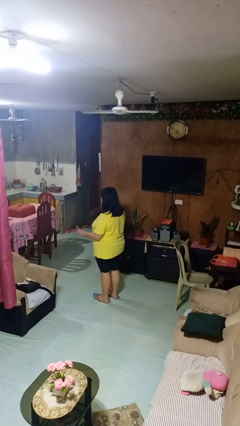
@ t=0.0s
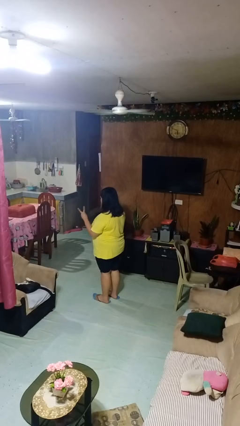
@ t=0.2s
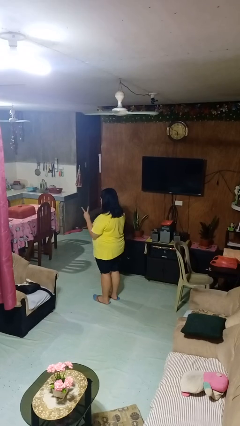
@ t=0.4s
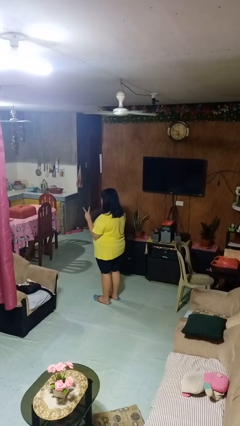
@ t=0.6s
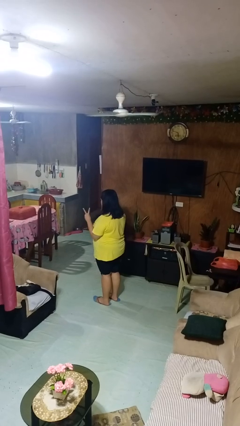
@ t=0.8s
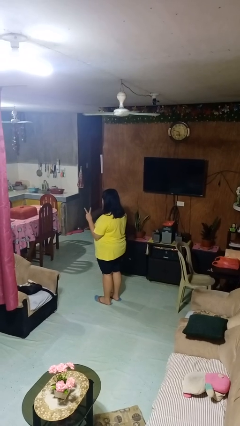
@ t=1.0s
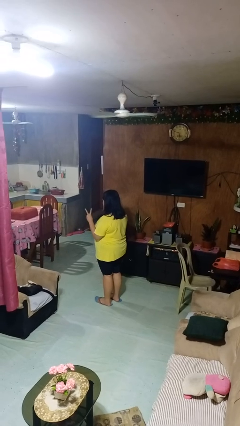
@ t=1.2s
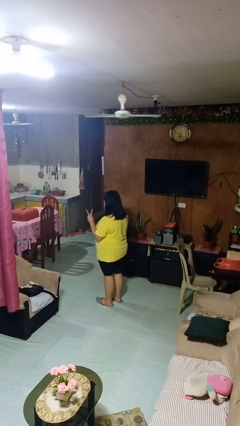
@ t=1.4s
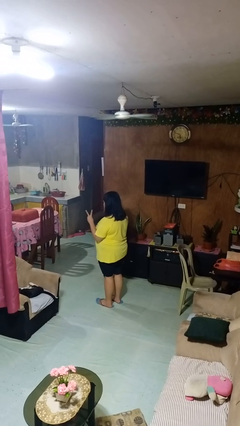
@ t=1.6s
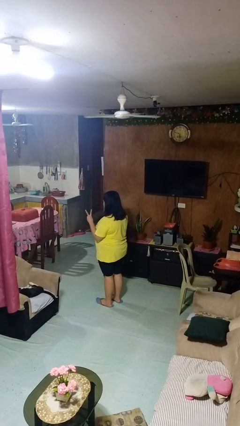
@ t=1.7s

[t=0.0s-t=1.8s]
person gestures peace

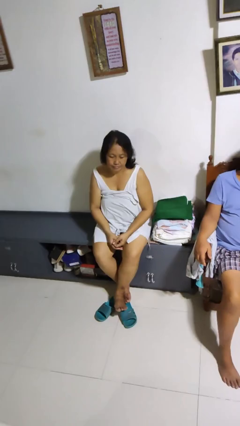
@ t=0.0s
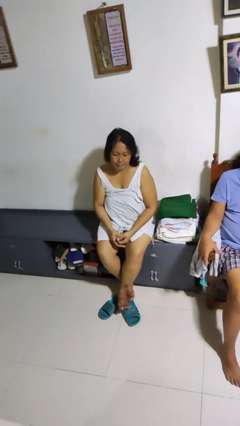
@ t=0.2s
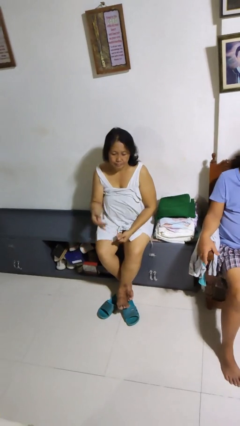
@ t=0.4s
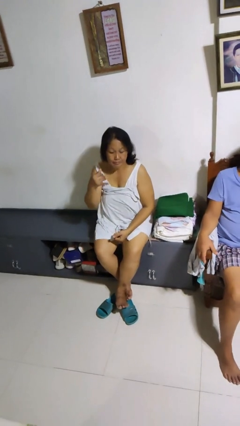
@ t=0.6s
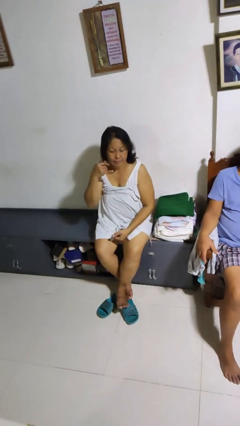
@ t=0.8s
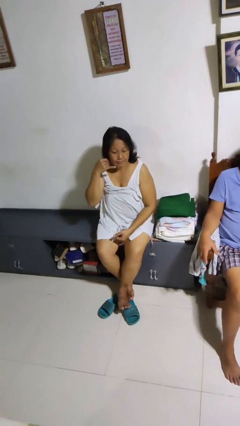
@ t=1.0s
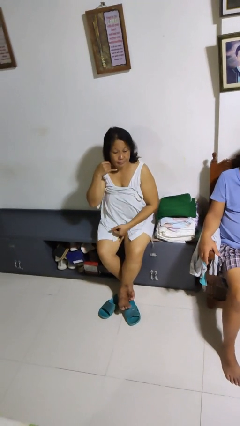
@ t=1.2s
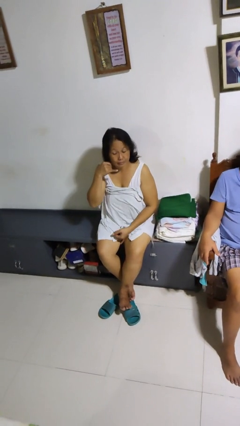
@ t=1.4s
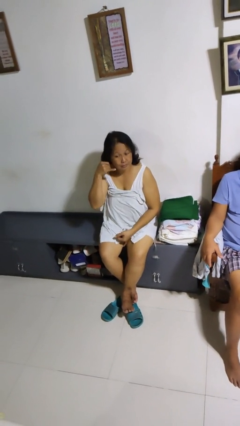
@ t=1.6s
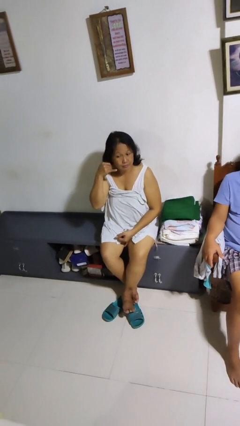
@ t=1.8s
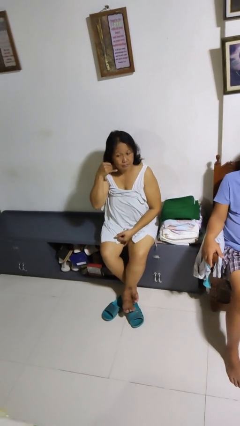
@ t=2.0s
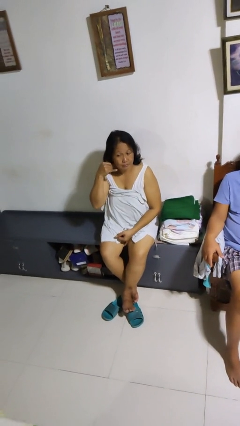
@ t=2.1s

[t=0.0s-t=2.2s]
person gestures call me

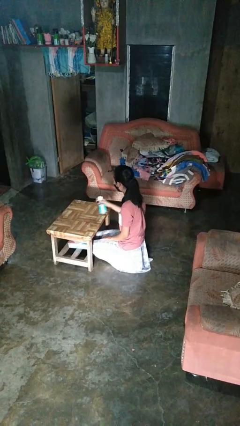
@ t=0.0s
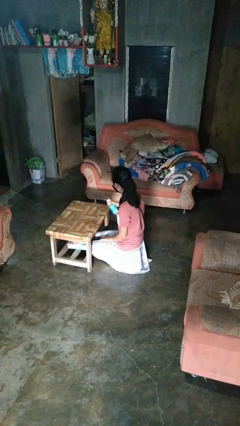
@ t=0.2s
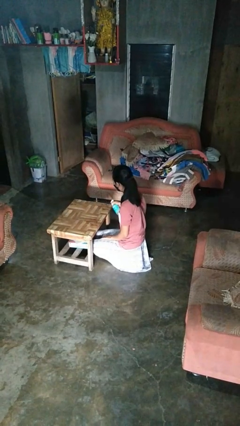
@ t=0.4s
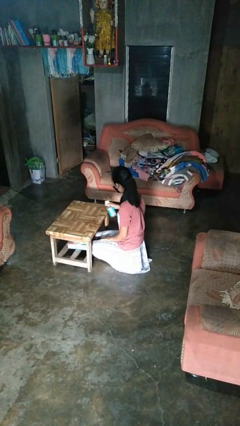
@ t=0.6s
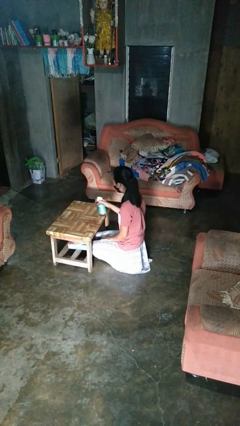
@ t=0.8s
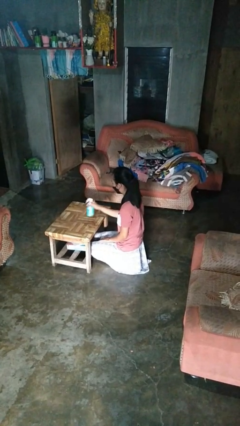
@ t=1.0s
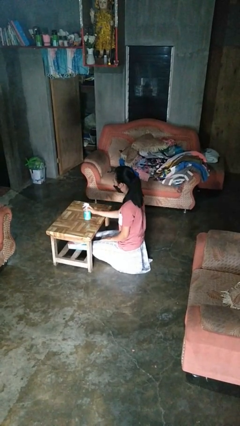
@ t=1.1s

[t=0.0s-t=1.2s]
person sprays from bottle

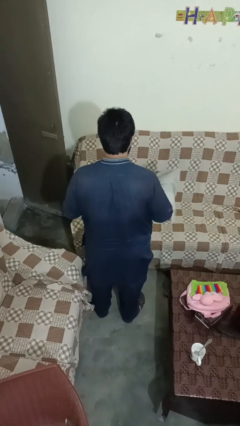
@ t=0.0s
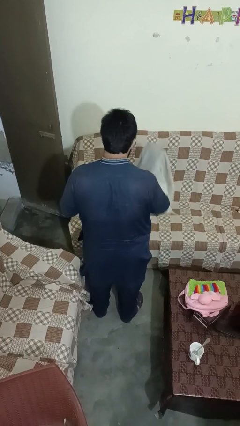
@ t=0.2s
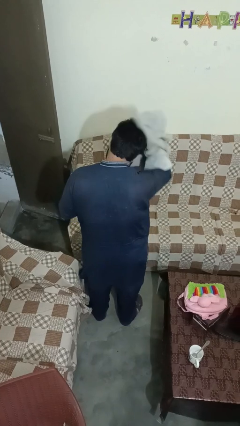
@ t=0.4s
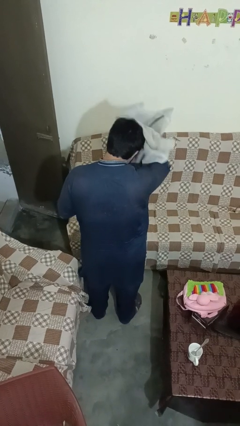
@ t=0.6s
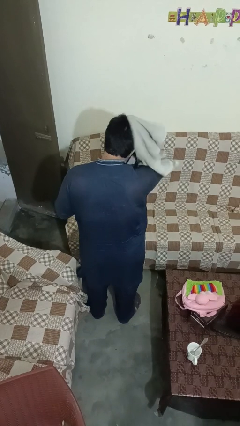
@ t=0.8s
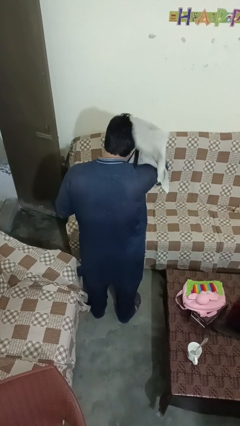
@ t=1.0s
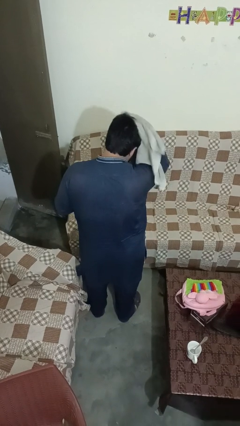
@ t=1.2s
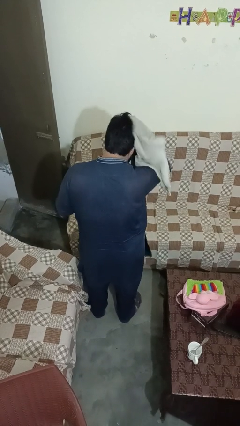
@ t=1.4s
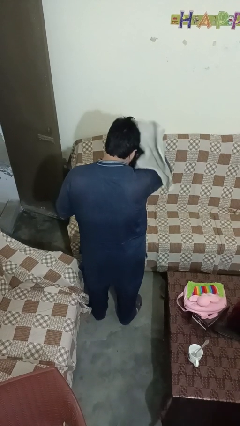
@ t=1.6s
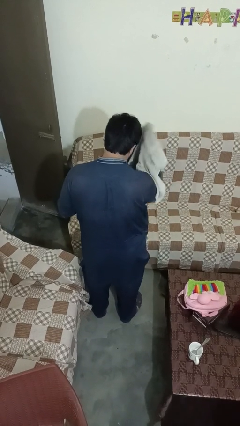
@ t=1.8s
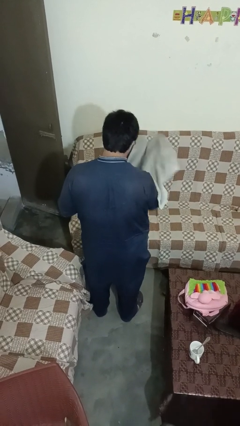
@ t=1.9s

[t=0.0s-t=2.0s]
person dries hair with towel

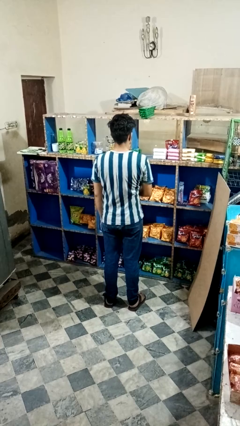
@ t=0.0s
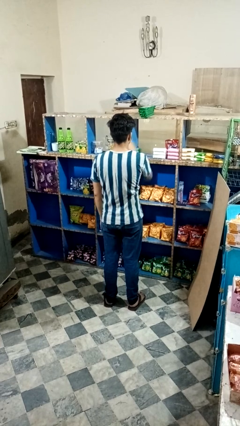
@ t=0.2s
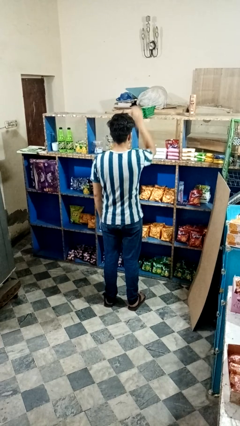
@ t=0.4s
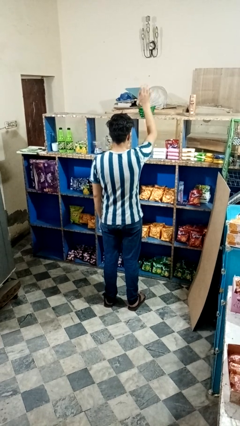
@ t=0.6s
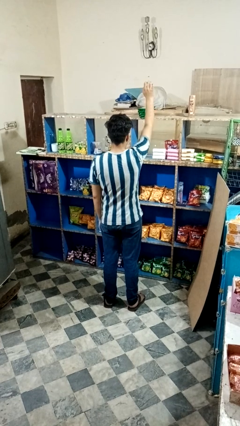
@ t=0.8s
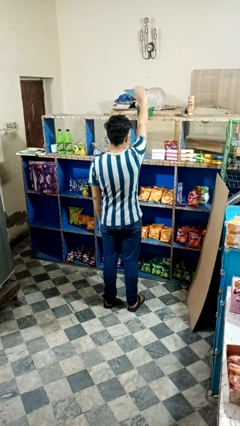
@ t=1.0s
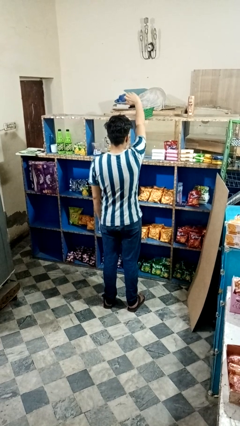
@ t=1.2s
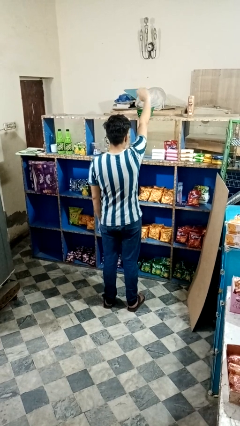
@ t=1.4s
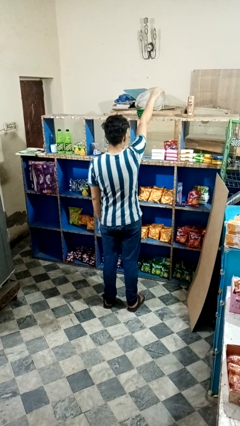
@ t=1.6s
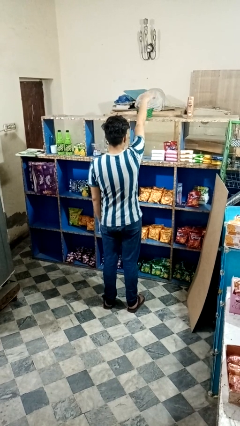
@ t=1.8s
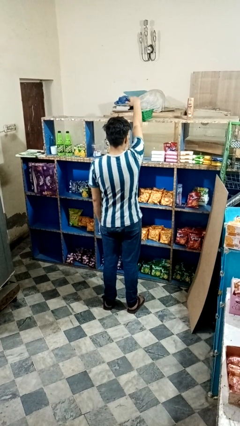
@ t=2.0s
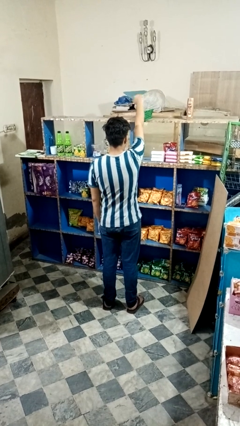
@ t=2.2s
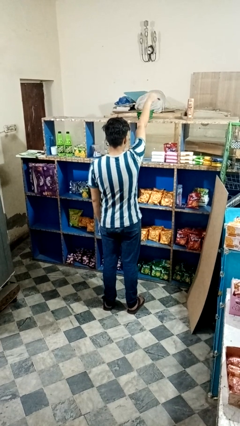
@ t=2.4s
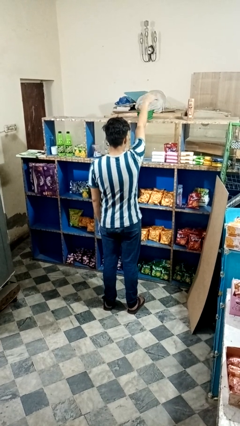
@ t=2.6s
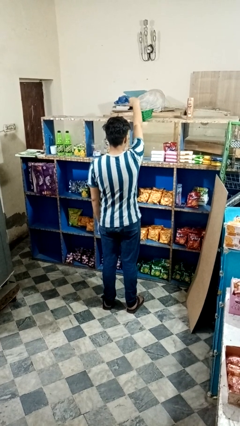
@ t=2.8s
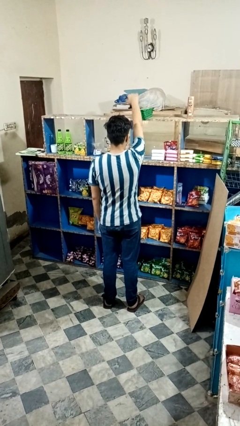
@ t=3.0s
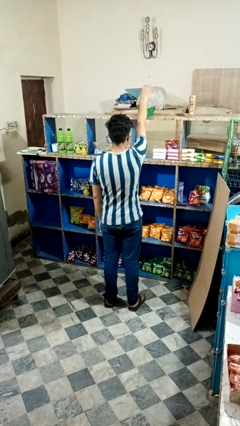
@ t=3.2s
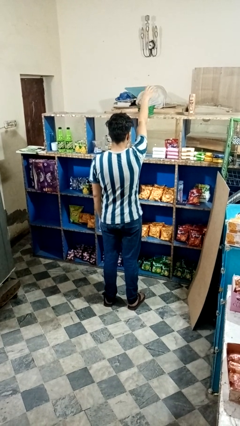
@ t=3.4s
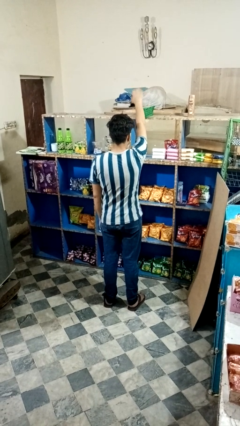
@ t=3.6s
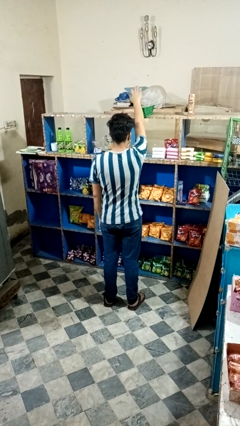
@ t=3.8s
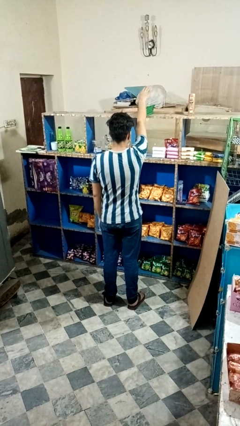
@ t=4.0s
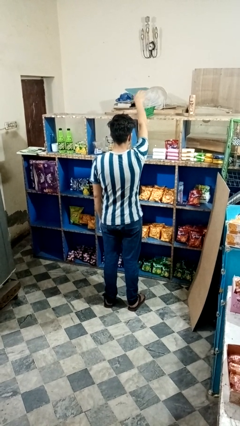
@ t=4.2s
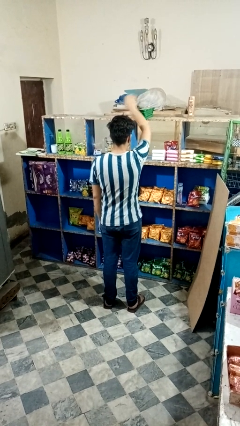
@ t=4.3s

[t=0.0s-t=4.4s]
person waves hand over object

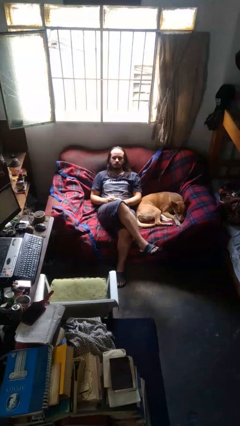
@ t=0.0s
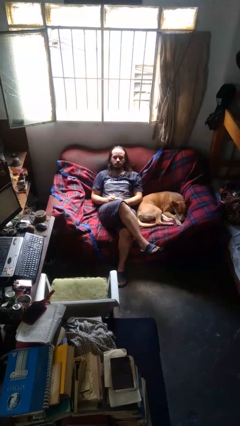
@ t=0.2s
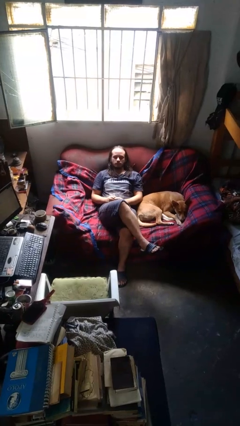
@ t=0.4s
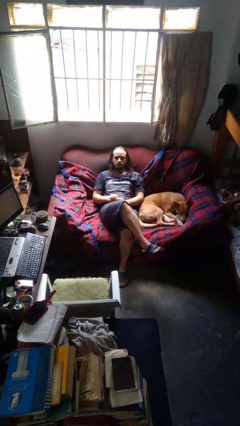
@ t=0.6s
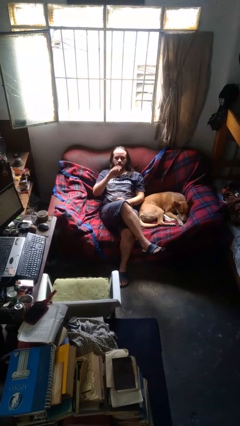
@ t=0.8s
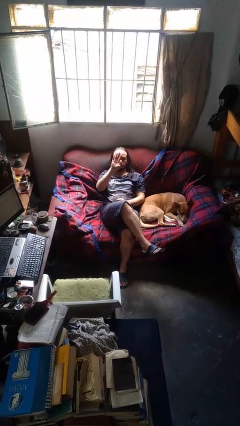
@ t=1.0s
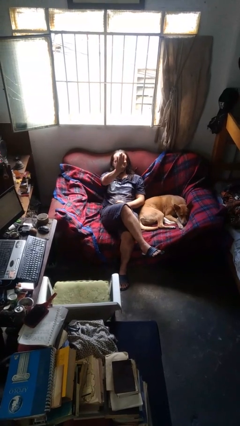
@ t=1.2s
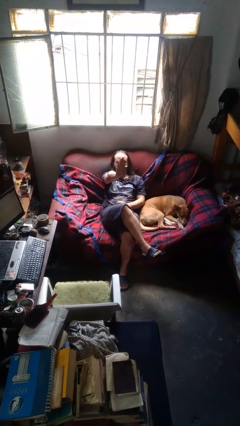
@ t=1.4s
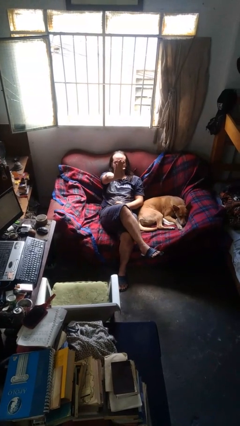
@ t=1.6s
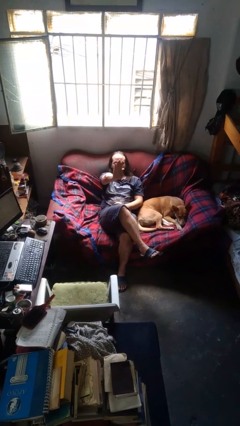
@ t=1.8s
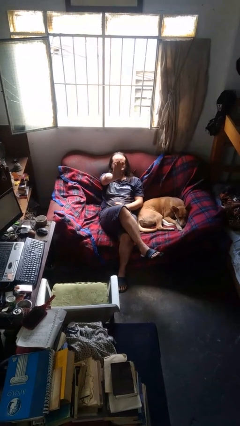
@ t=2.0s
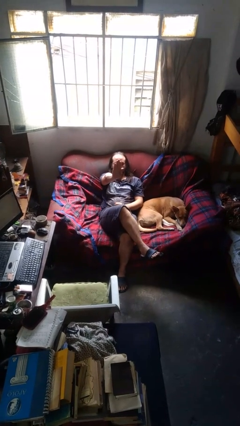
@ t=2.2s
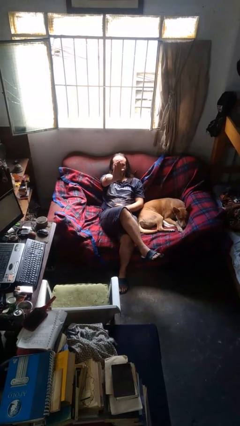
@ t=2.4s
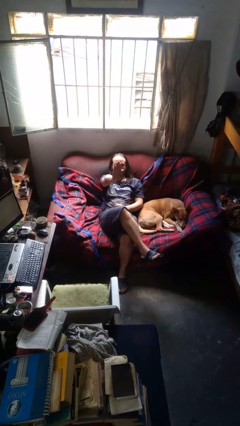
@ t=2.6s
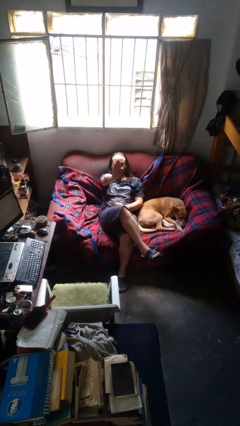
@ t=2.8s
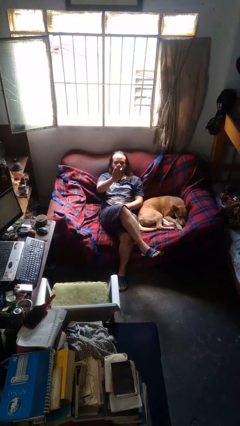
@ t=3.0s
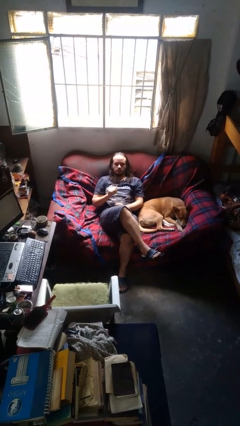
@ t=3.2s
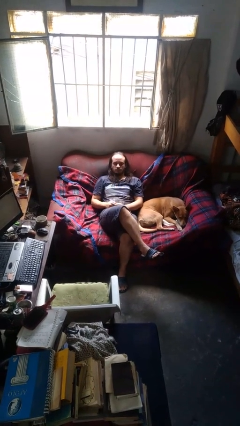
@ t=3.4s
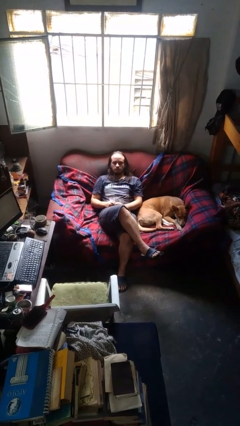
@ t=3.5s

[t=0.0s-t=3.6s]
person gestures stop

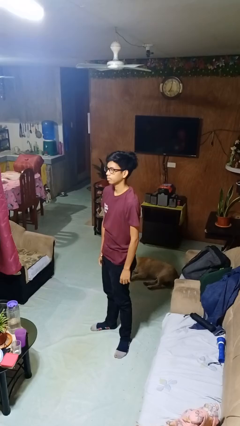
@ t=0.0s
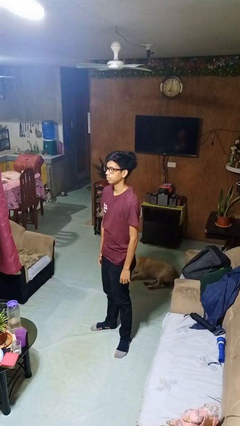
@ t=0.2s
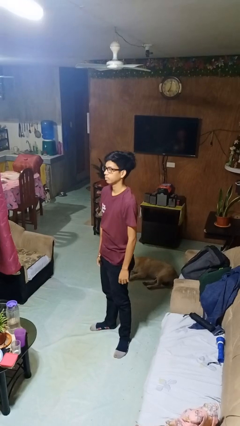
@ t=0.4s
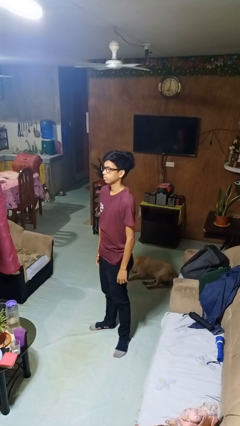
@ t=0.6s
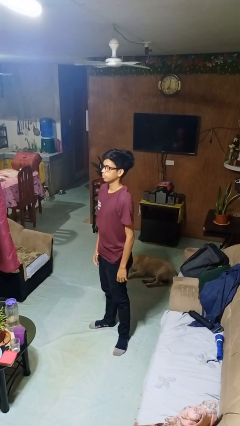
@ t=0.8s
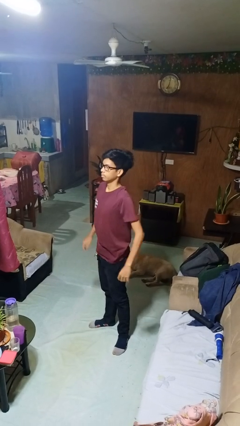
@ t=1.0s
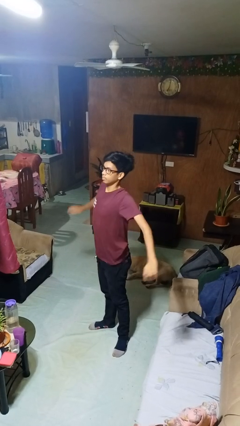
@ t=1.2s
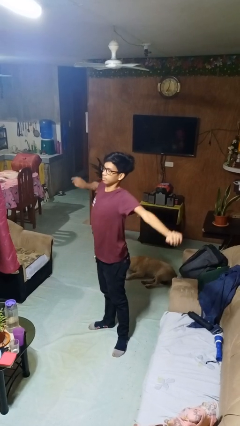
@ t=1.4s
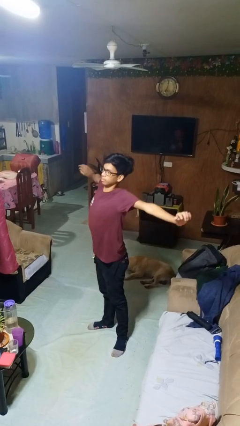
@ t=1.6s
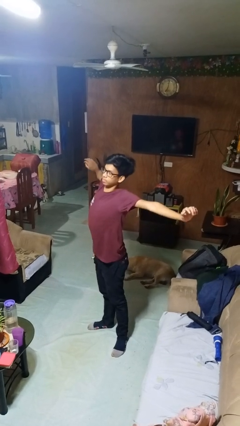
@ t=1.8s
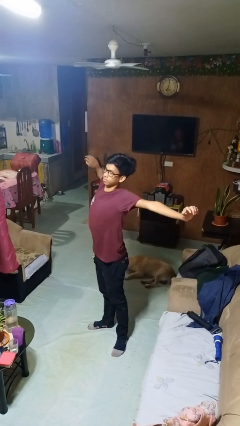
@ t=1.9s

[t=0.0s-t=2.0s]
person stretches arms to side
